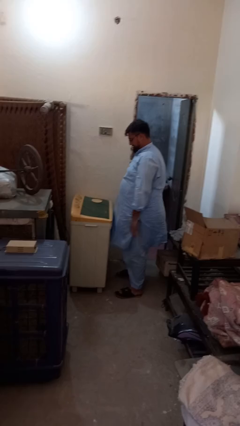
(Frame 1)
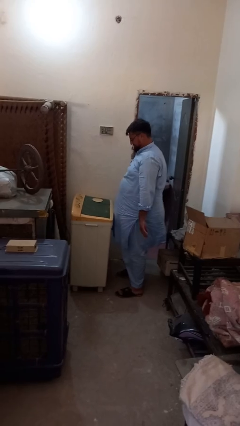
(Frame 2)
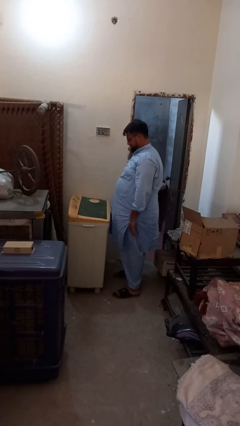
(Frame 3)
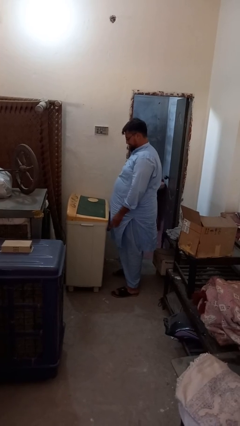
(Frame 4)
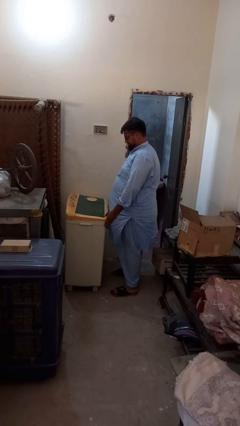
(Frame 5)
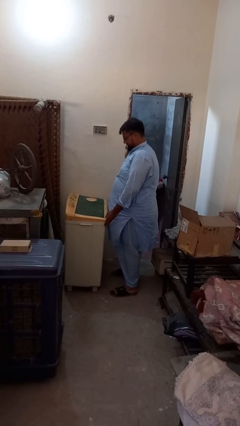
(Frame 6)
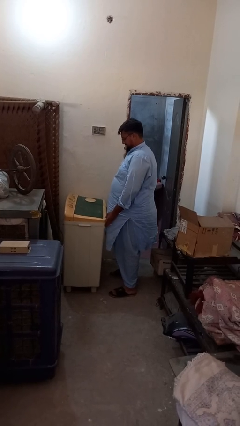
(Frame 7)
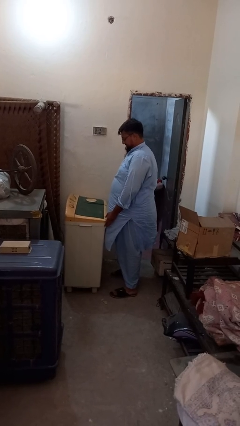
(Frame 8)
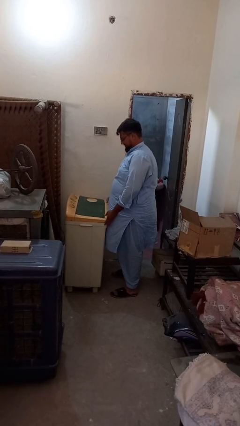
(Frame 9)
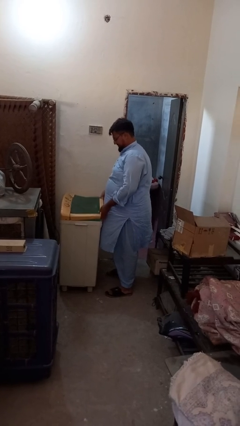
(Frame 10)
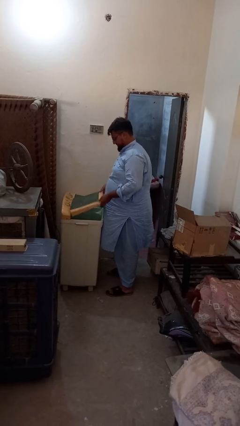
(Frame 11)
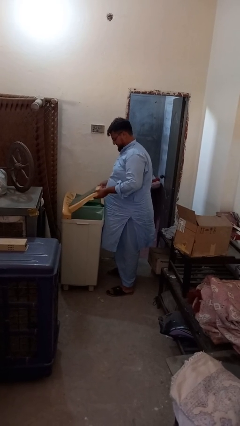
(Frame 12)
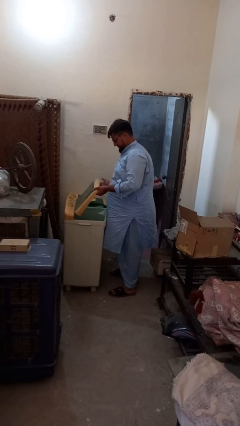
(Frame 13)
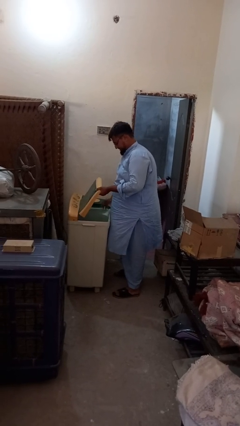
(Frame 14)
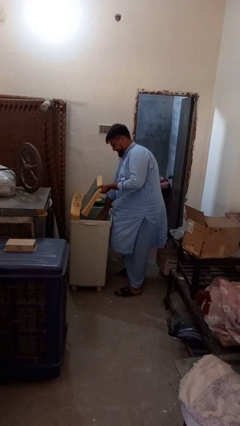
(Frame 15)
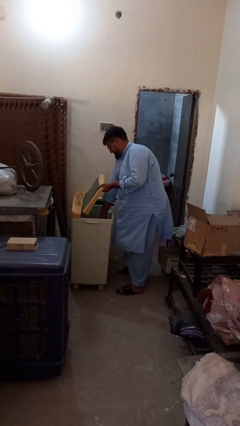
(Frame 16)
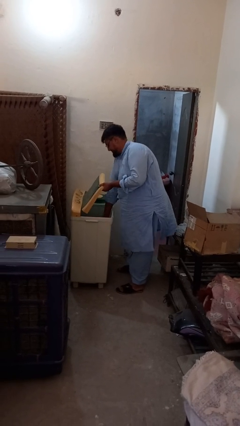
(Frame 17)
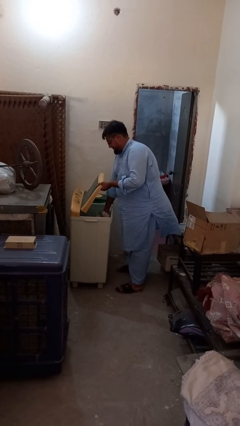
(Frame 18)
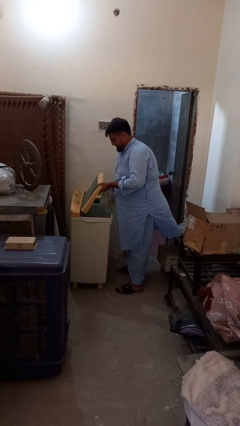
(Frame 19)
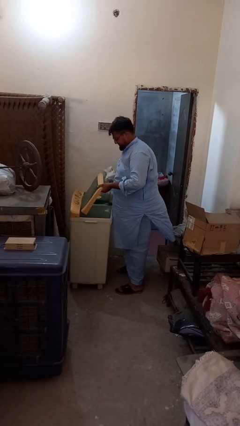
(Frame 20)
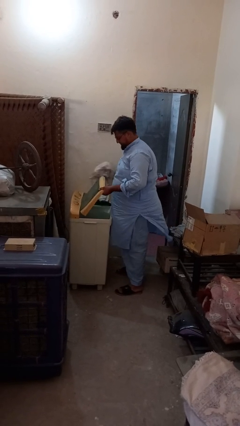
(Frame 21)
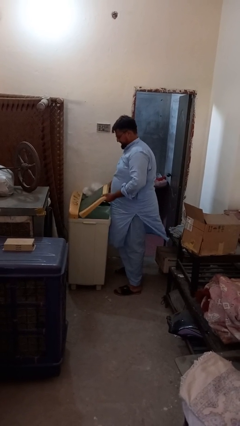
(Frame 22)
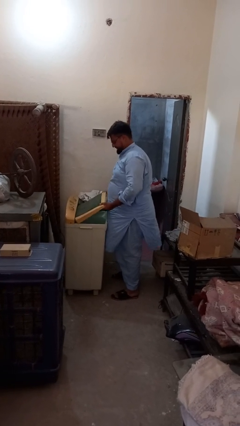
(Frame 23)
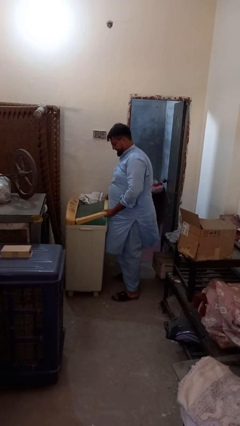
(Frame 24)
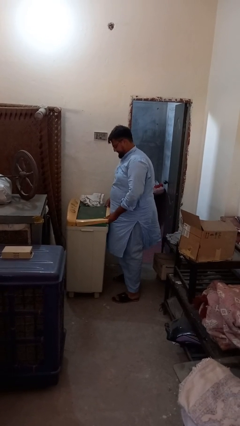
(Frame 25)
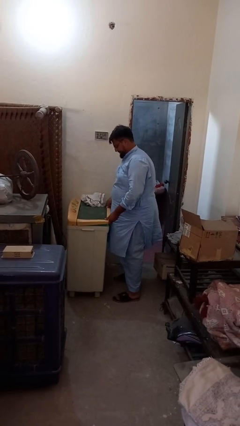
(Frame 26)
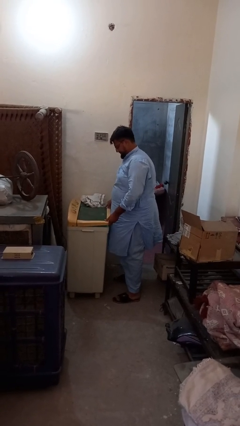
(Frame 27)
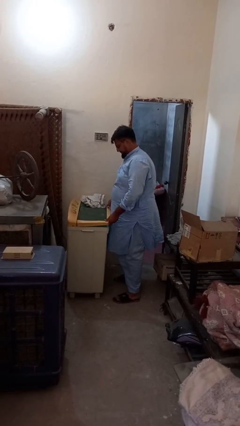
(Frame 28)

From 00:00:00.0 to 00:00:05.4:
person unloads clotheswasher

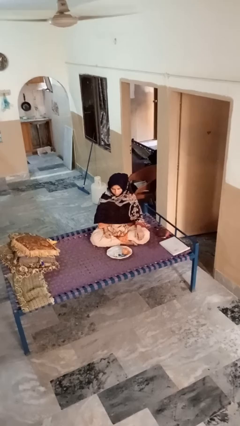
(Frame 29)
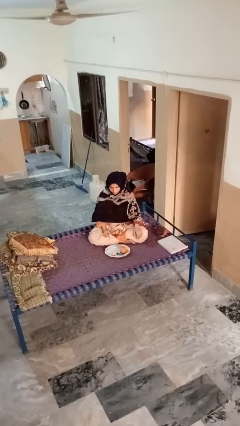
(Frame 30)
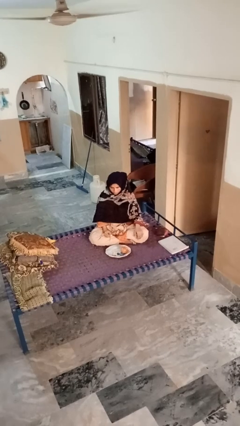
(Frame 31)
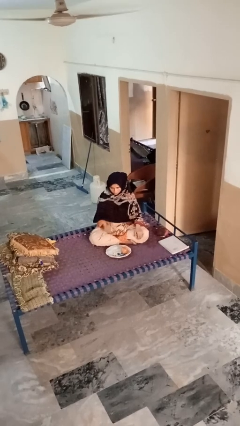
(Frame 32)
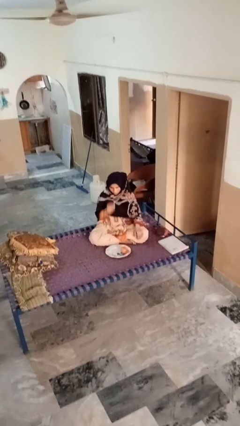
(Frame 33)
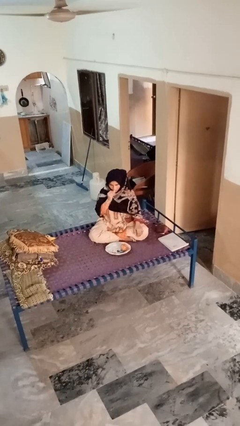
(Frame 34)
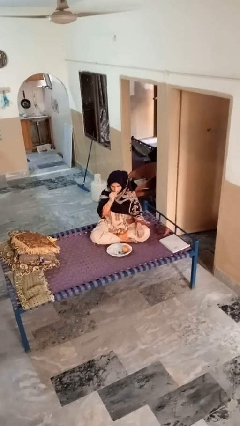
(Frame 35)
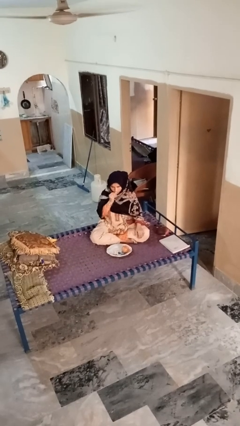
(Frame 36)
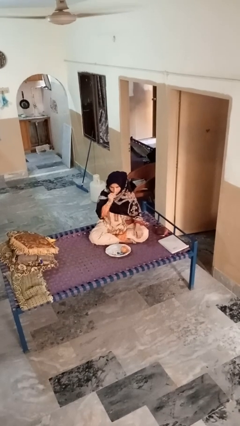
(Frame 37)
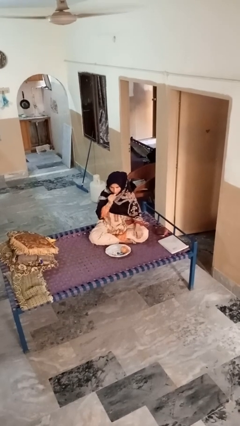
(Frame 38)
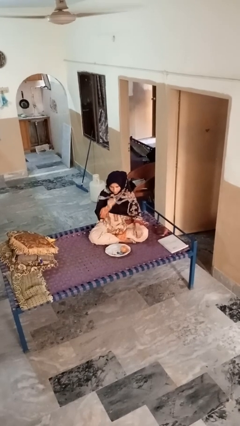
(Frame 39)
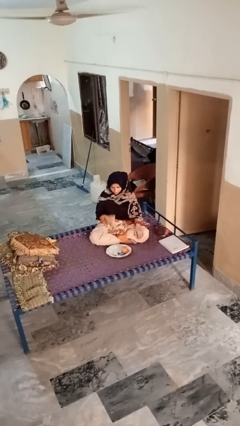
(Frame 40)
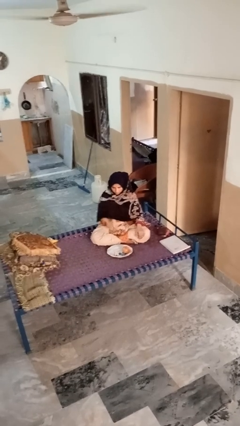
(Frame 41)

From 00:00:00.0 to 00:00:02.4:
person eats apple

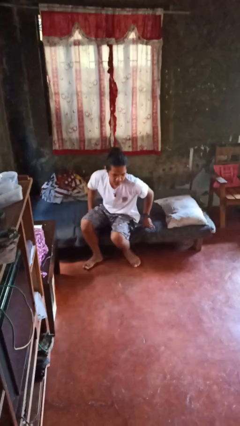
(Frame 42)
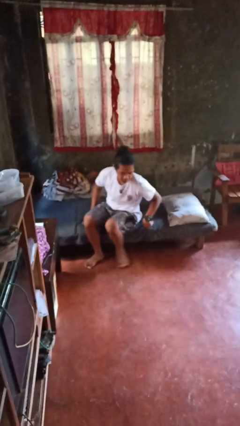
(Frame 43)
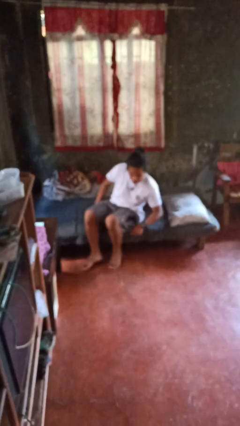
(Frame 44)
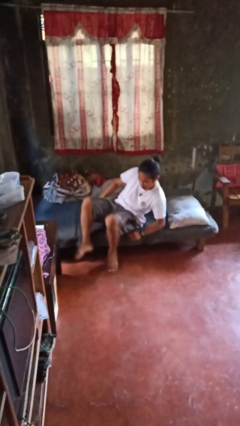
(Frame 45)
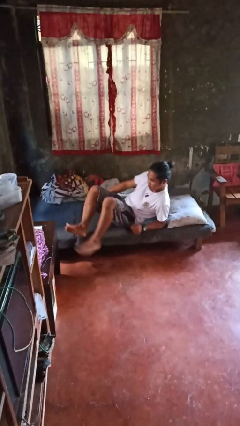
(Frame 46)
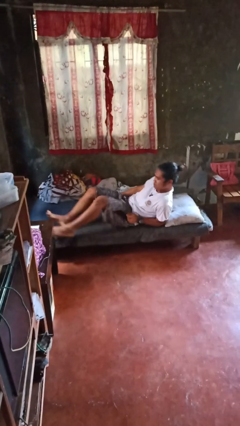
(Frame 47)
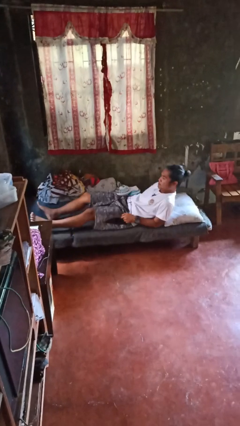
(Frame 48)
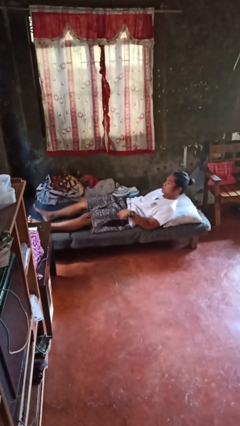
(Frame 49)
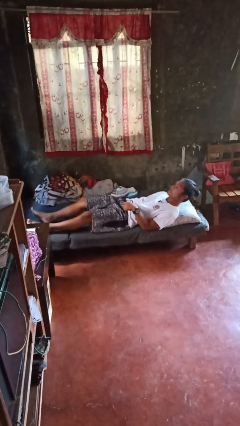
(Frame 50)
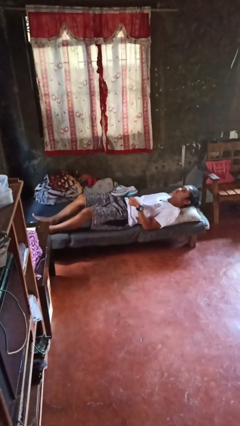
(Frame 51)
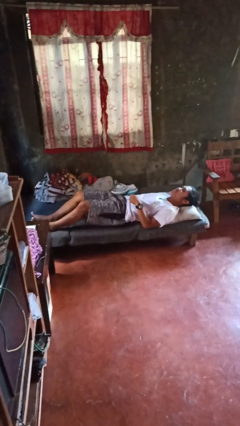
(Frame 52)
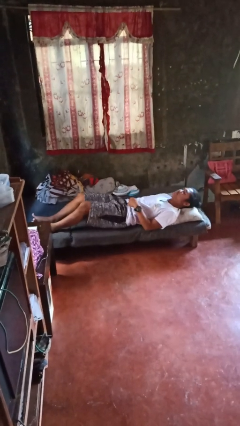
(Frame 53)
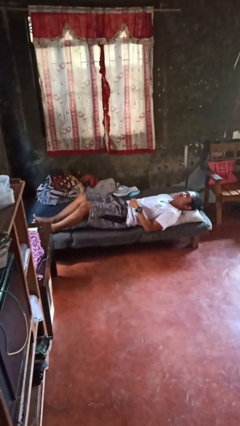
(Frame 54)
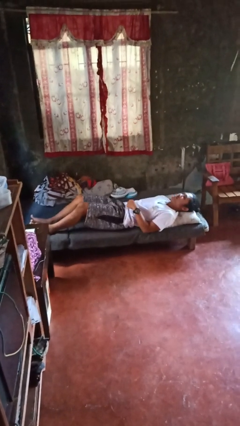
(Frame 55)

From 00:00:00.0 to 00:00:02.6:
person lies down on bed

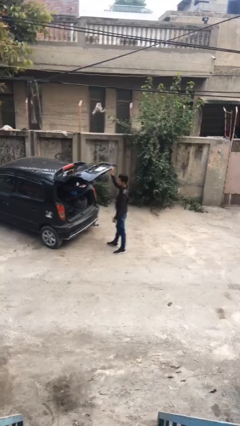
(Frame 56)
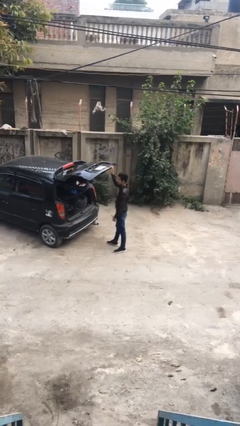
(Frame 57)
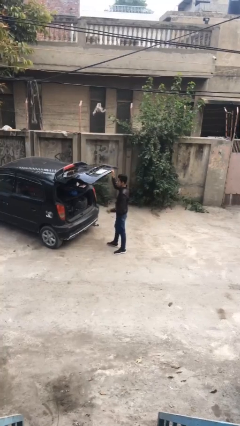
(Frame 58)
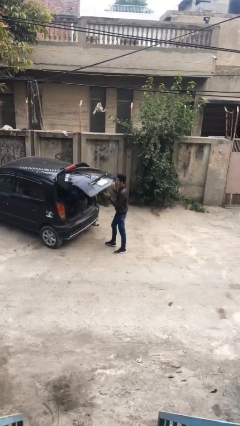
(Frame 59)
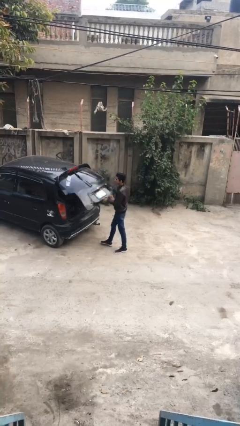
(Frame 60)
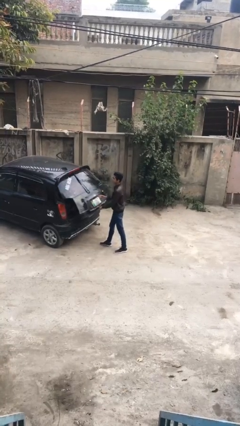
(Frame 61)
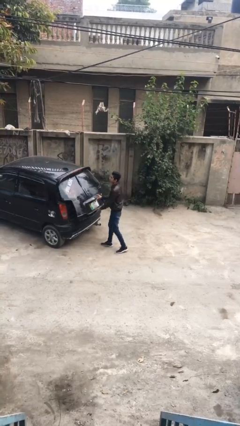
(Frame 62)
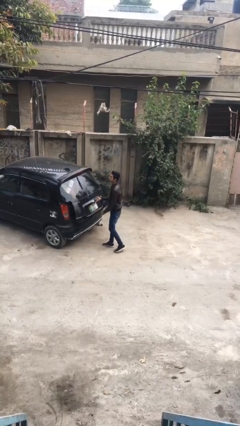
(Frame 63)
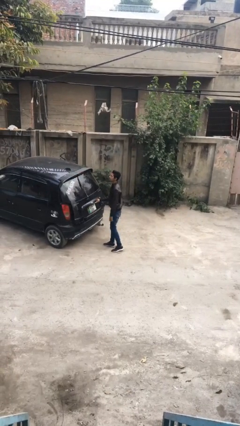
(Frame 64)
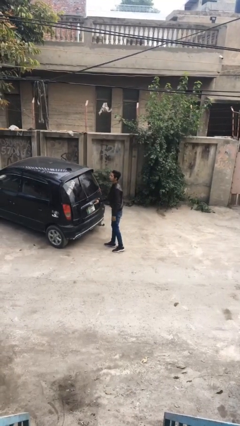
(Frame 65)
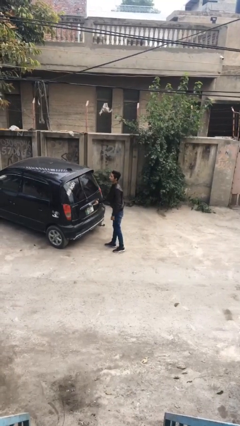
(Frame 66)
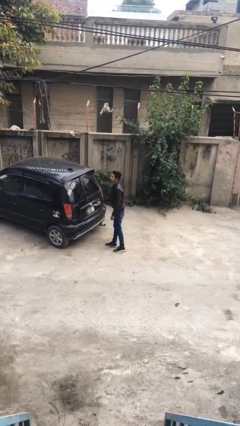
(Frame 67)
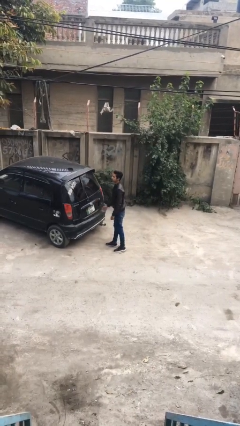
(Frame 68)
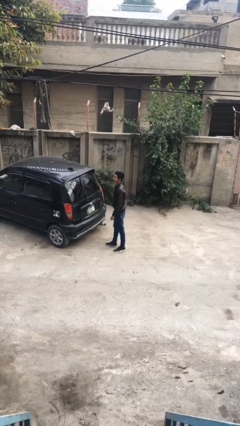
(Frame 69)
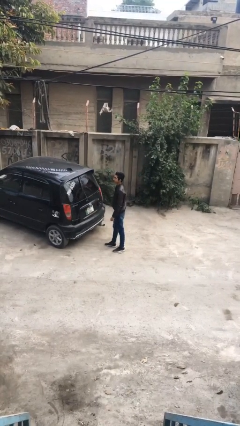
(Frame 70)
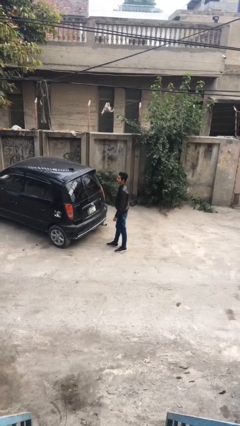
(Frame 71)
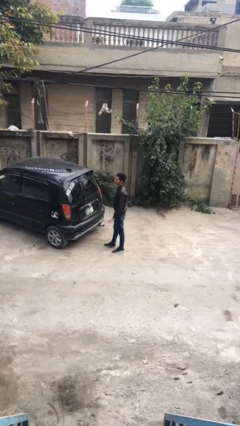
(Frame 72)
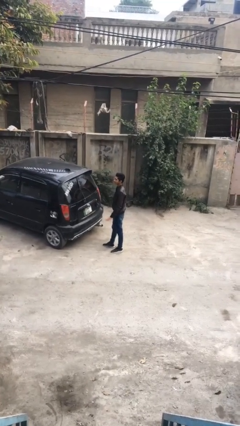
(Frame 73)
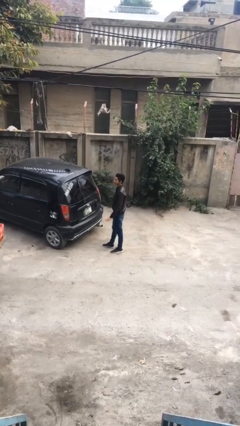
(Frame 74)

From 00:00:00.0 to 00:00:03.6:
person closes car trunk

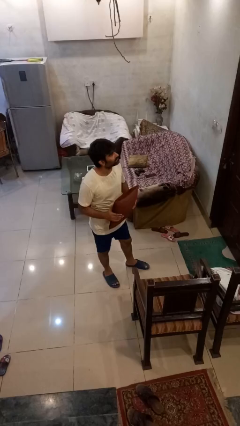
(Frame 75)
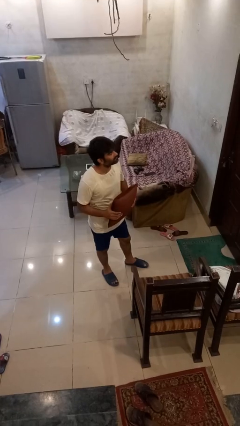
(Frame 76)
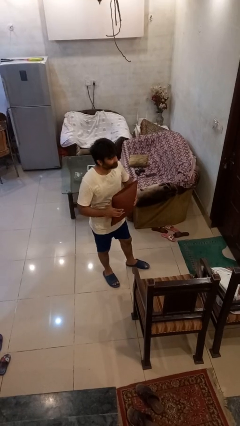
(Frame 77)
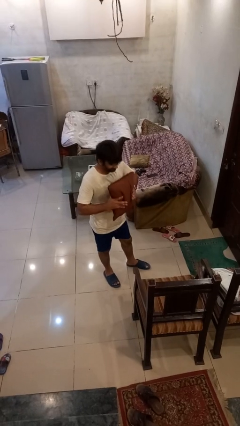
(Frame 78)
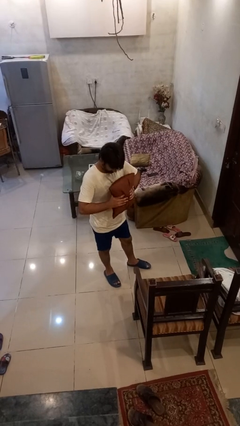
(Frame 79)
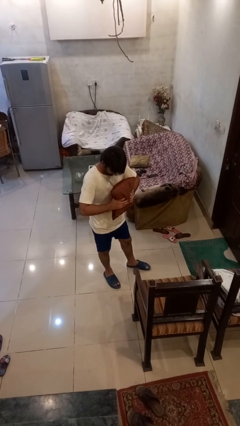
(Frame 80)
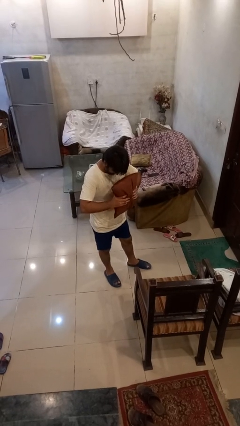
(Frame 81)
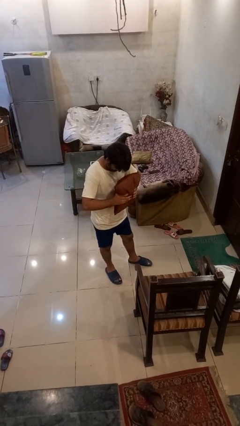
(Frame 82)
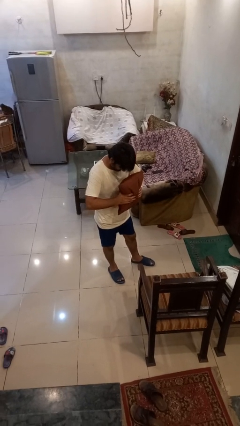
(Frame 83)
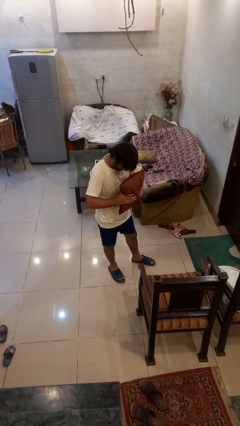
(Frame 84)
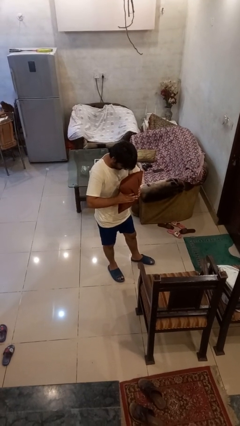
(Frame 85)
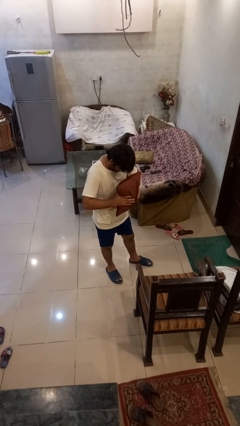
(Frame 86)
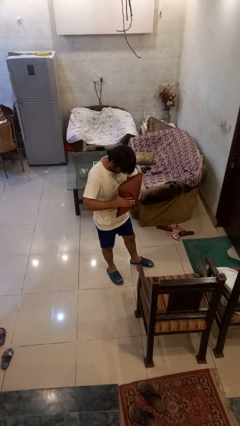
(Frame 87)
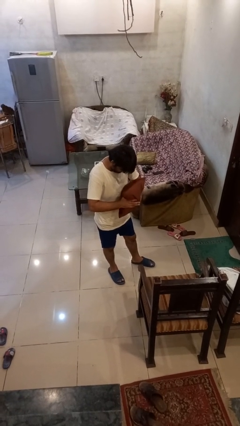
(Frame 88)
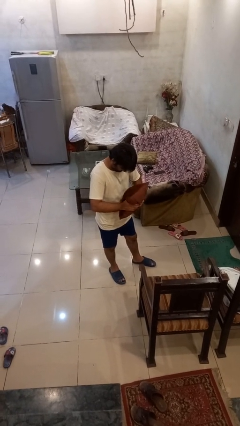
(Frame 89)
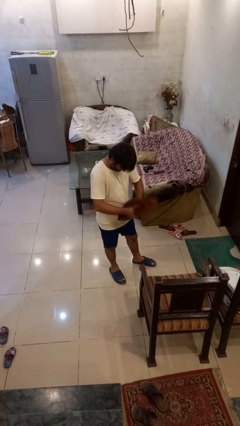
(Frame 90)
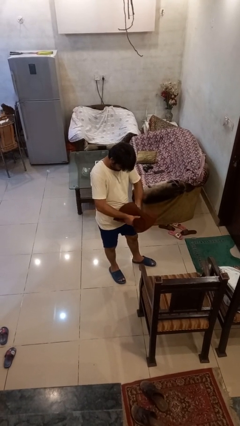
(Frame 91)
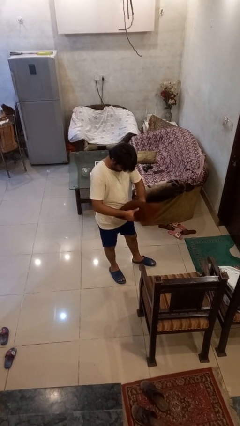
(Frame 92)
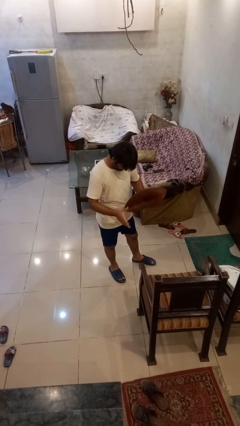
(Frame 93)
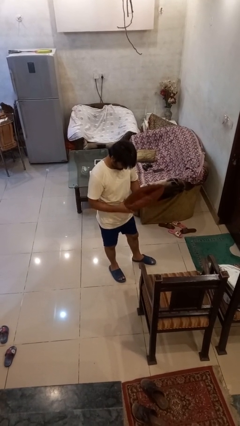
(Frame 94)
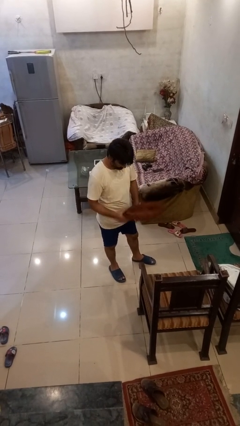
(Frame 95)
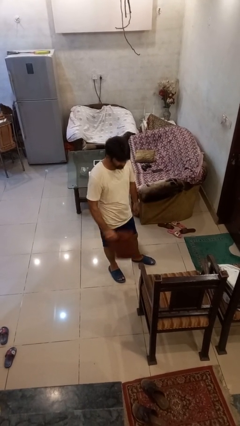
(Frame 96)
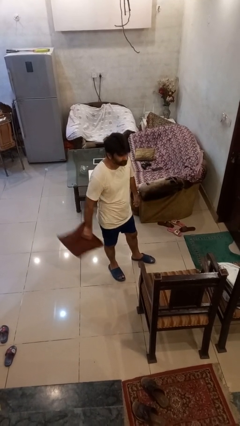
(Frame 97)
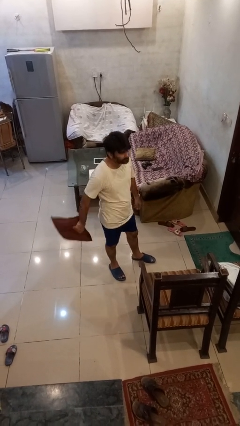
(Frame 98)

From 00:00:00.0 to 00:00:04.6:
person squeezes object
